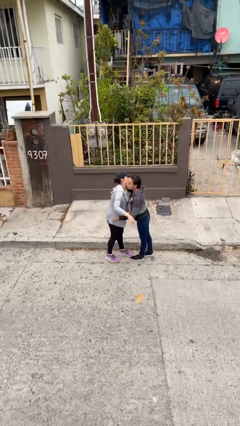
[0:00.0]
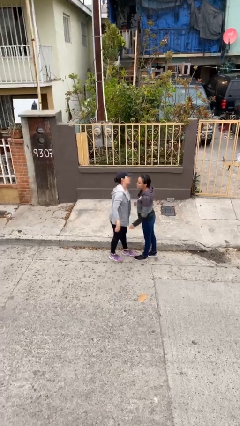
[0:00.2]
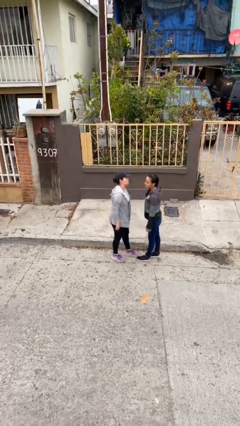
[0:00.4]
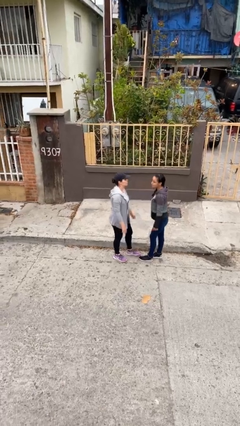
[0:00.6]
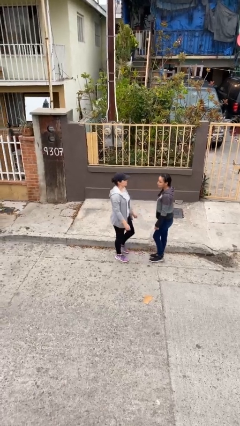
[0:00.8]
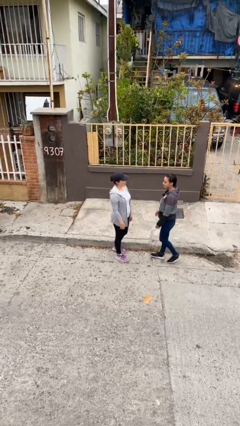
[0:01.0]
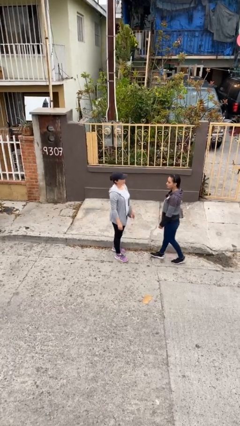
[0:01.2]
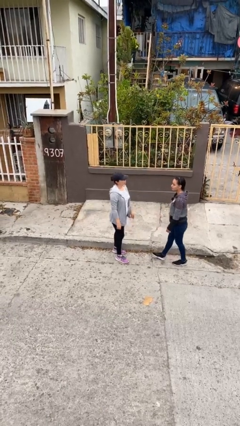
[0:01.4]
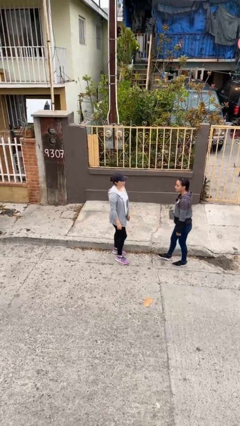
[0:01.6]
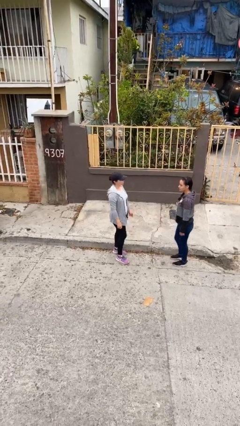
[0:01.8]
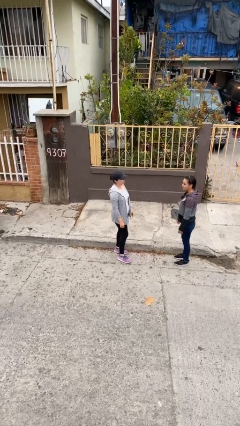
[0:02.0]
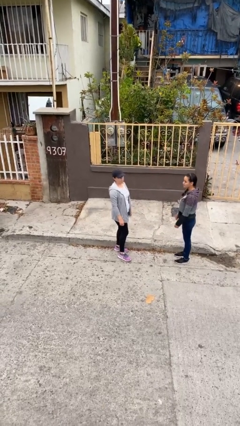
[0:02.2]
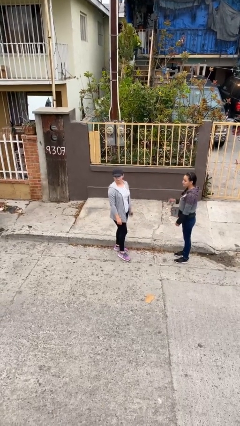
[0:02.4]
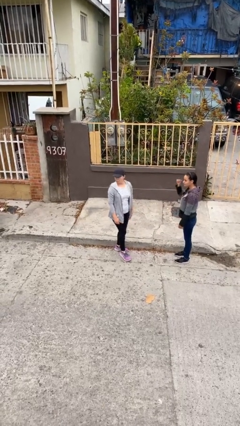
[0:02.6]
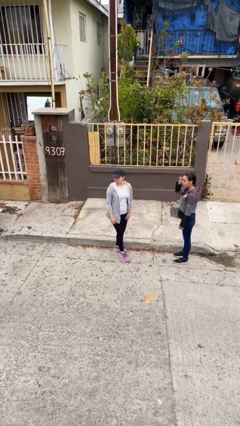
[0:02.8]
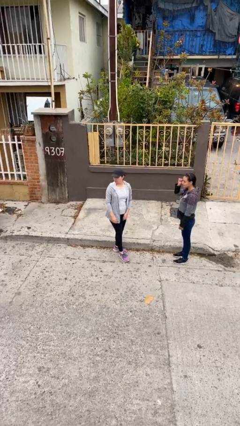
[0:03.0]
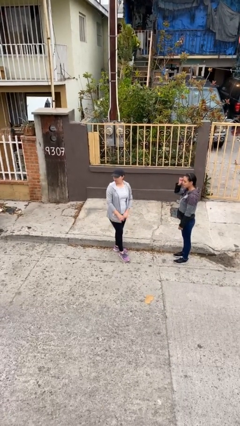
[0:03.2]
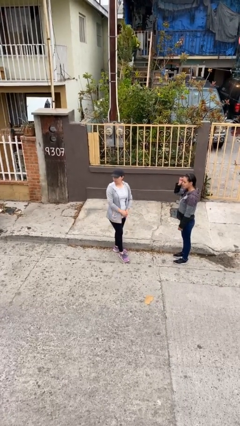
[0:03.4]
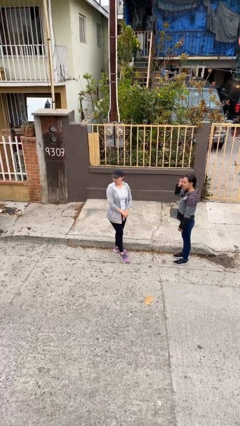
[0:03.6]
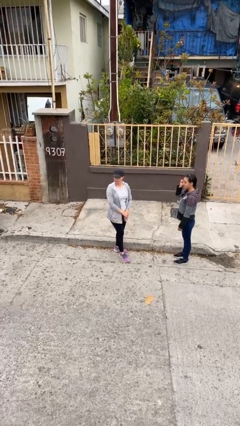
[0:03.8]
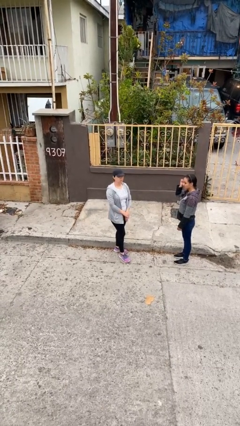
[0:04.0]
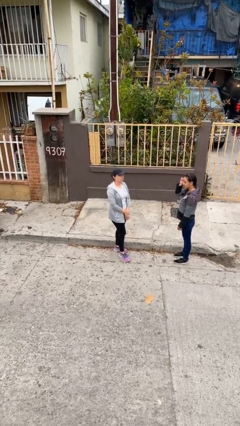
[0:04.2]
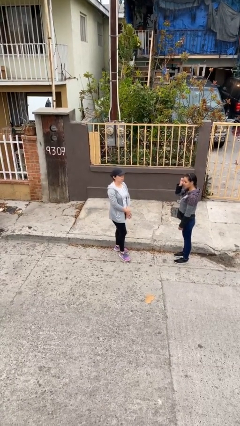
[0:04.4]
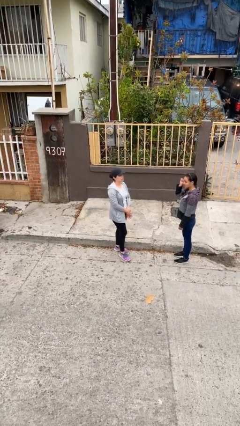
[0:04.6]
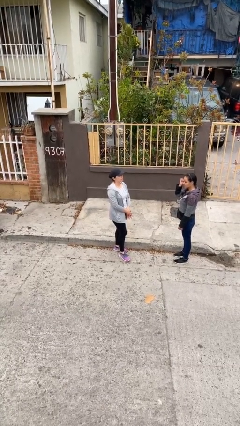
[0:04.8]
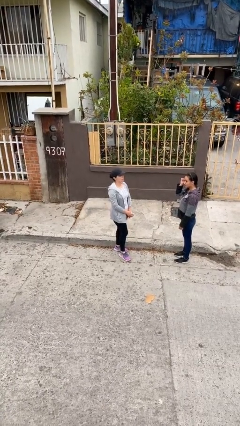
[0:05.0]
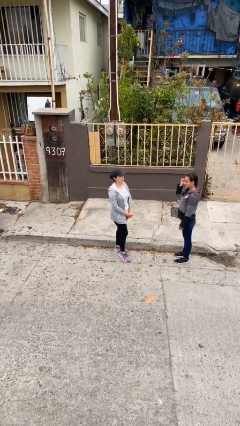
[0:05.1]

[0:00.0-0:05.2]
person talks to person

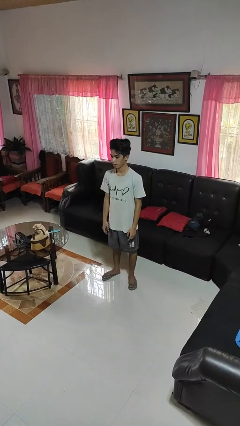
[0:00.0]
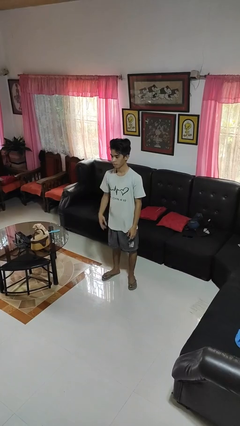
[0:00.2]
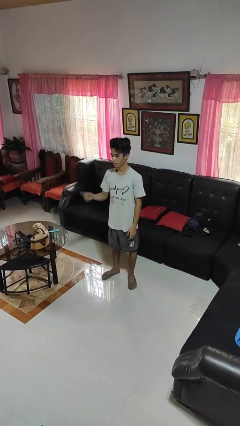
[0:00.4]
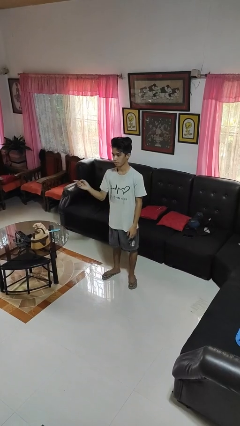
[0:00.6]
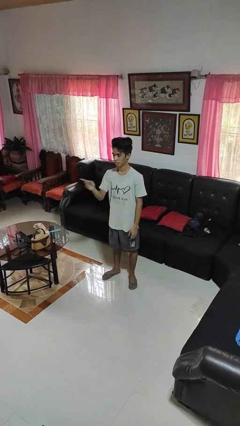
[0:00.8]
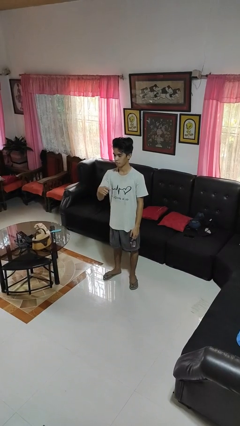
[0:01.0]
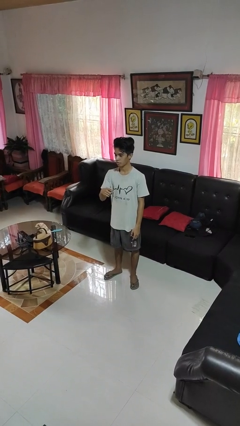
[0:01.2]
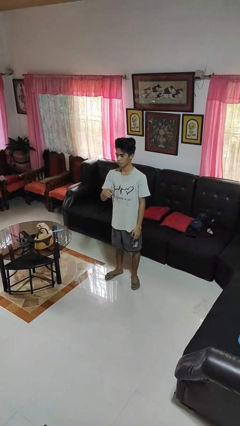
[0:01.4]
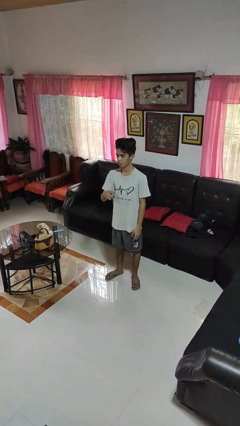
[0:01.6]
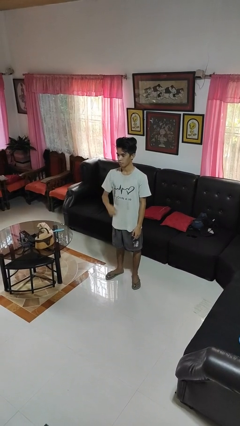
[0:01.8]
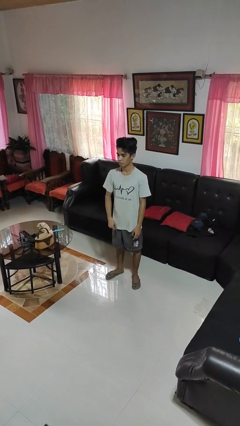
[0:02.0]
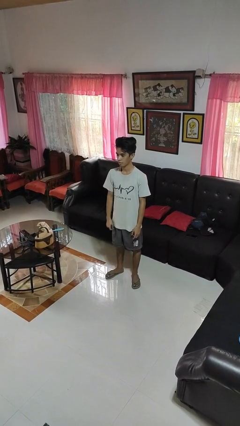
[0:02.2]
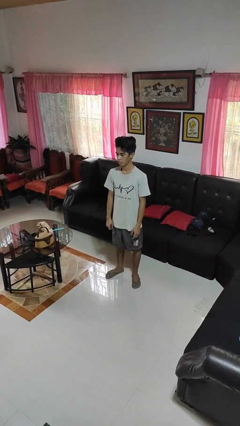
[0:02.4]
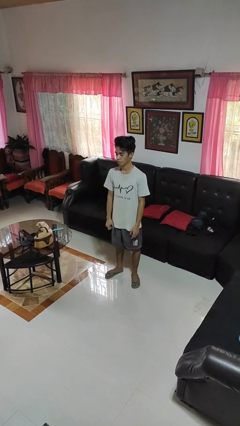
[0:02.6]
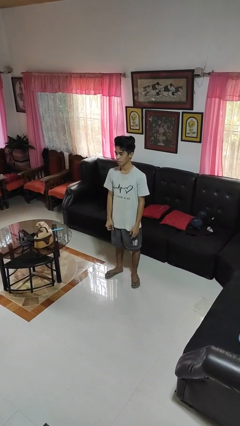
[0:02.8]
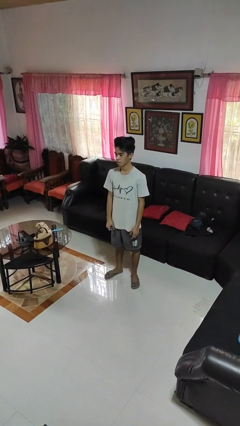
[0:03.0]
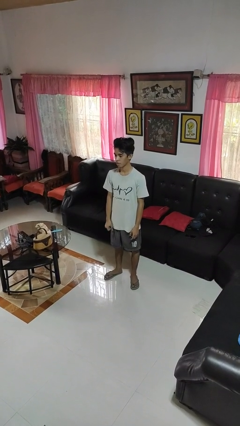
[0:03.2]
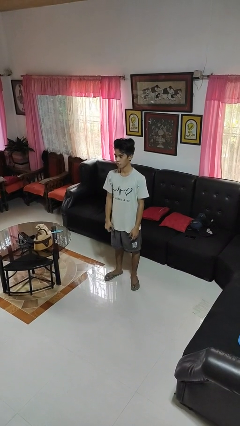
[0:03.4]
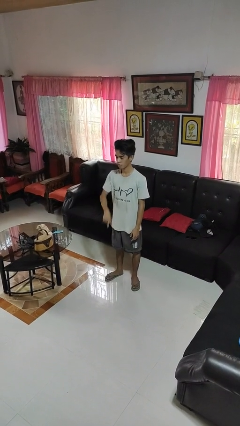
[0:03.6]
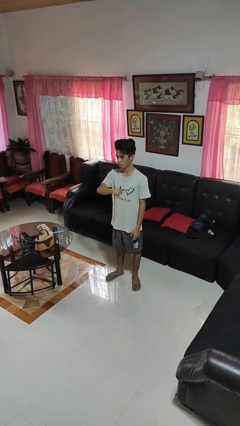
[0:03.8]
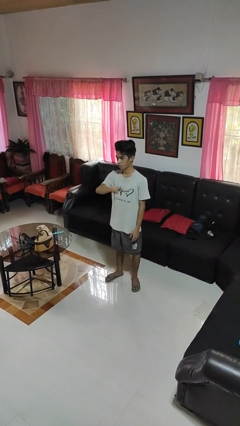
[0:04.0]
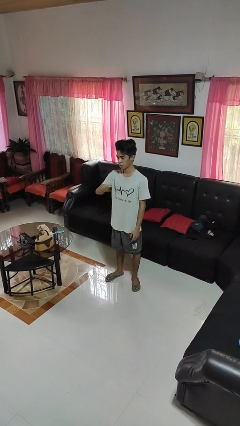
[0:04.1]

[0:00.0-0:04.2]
person gestures swipe left

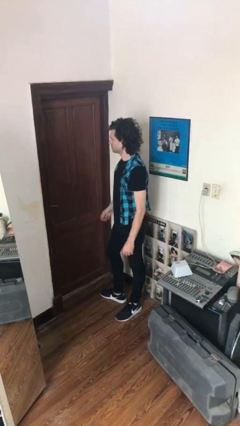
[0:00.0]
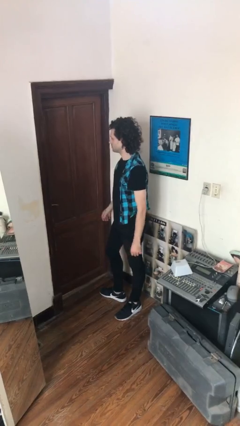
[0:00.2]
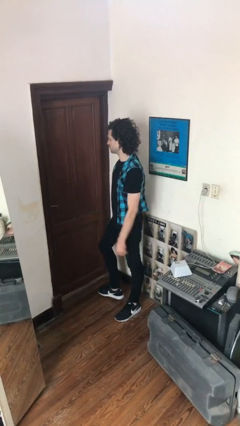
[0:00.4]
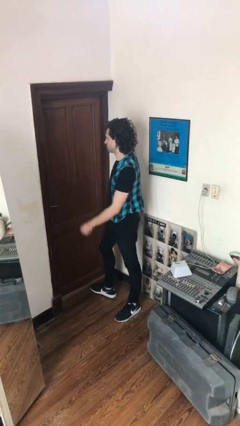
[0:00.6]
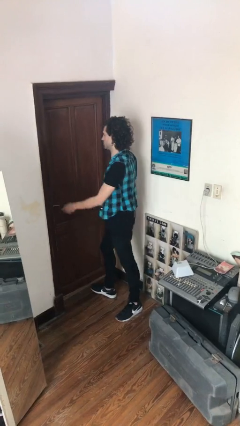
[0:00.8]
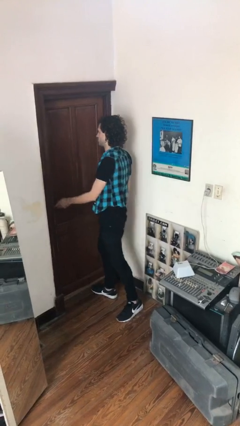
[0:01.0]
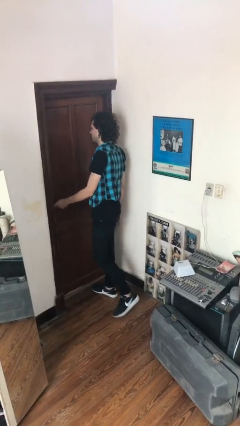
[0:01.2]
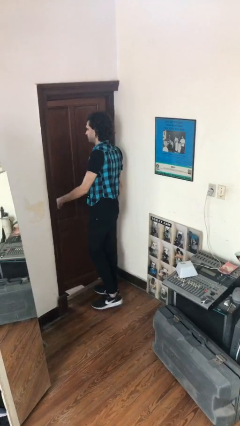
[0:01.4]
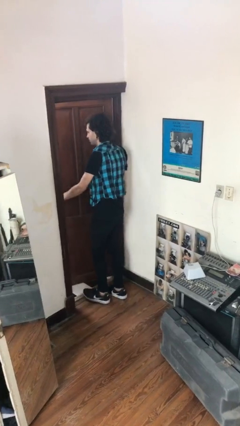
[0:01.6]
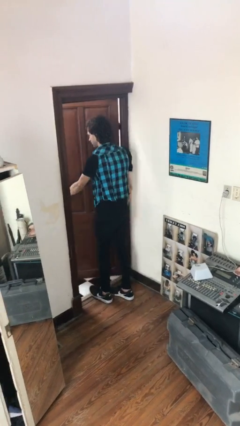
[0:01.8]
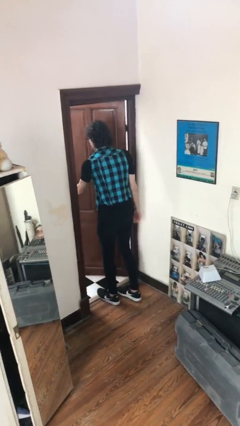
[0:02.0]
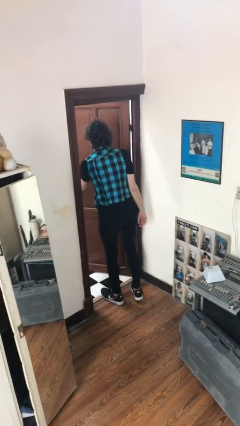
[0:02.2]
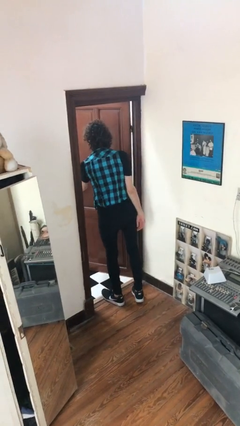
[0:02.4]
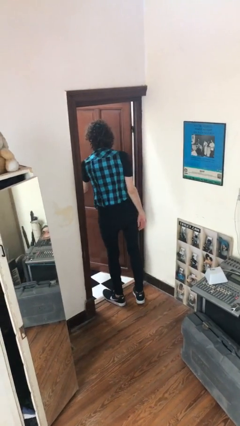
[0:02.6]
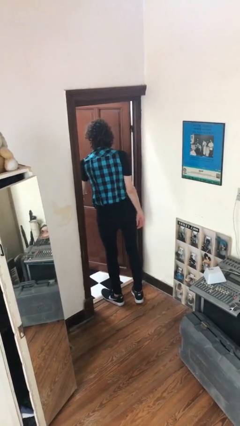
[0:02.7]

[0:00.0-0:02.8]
person opens facility door

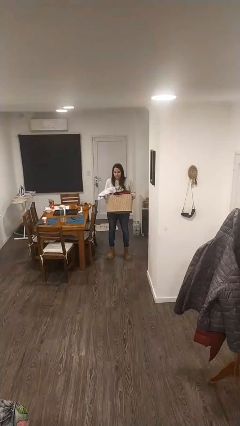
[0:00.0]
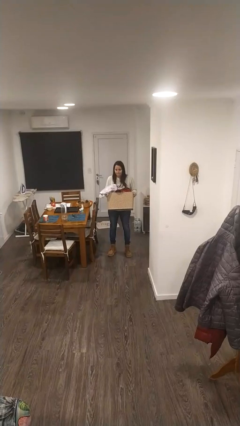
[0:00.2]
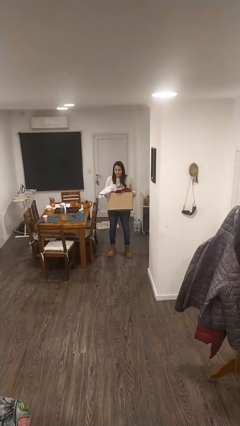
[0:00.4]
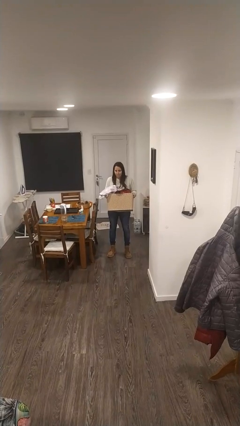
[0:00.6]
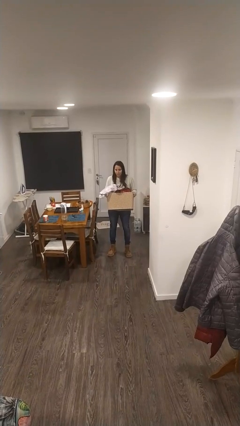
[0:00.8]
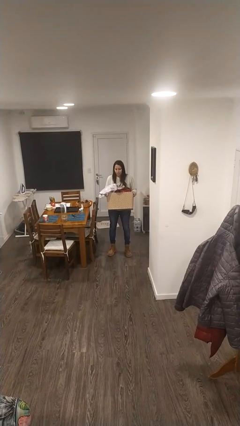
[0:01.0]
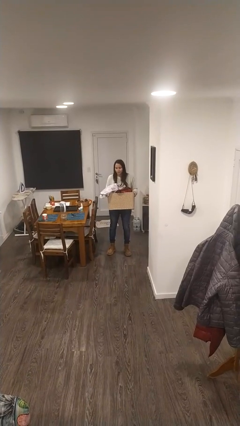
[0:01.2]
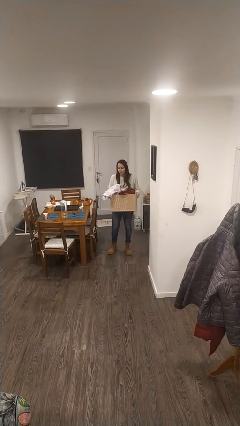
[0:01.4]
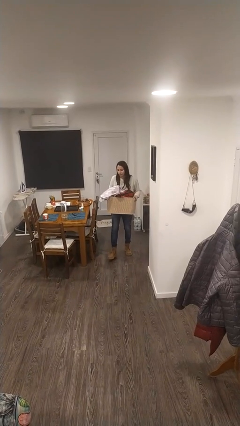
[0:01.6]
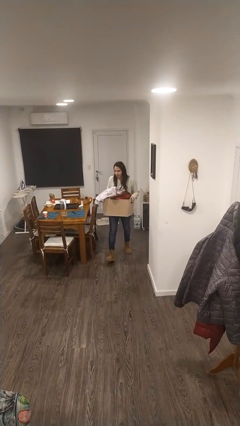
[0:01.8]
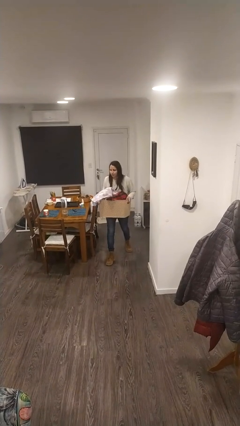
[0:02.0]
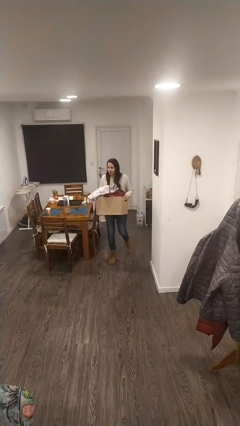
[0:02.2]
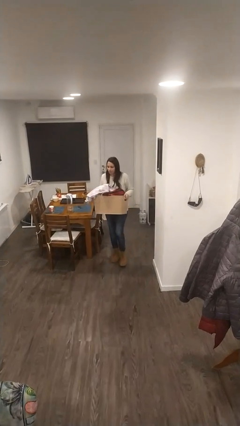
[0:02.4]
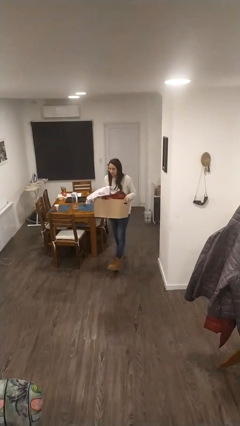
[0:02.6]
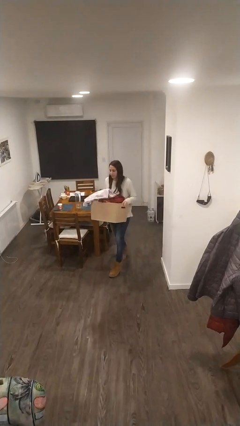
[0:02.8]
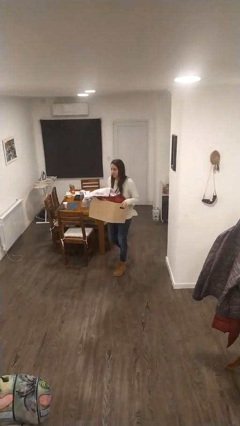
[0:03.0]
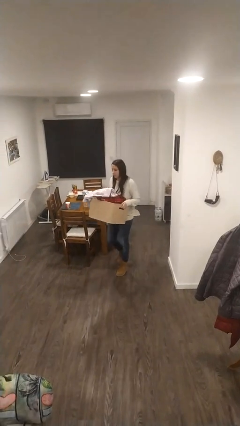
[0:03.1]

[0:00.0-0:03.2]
person carries laundry basket

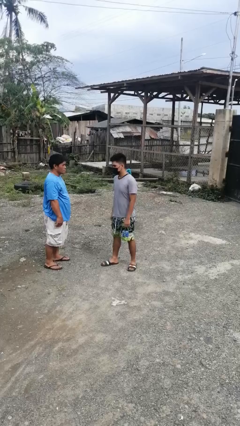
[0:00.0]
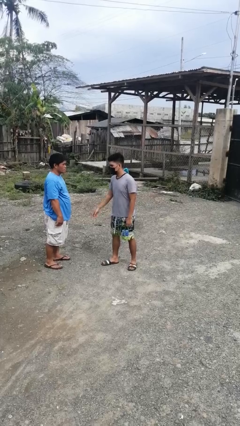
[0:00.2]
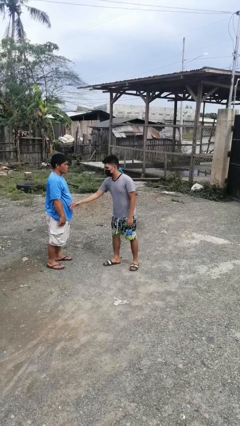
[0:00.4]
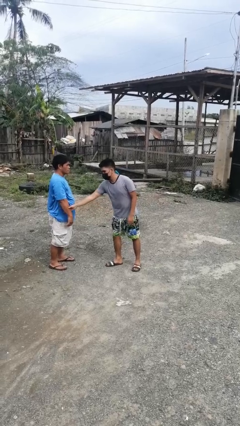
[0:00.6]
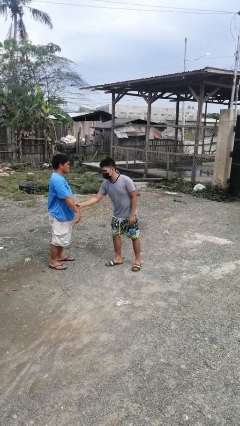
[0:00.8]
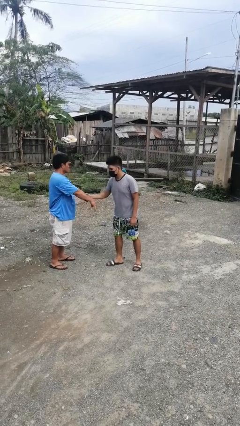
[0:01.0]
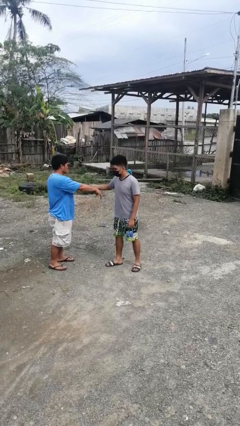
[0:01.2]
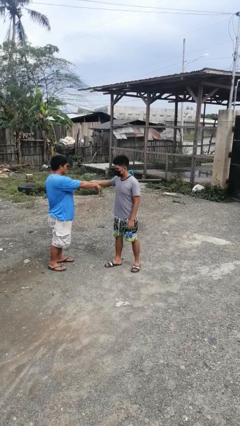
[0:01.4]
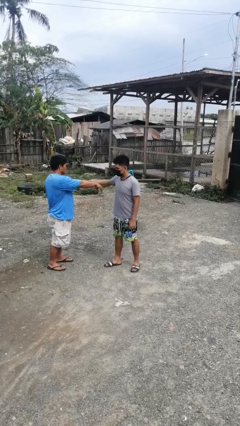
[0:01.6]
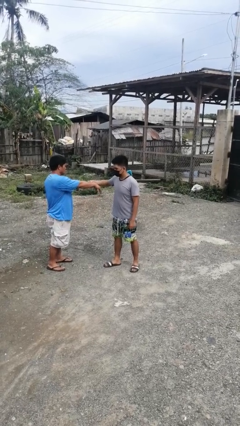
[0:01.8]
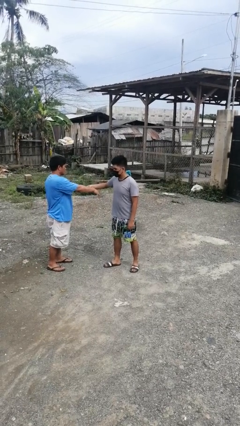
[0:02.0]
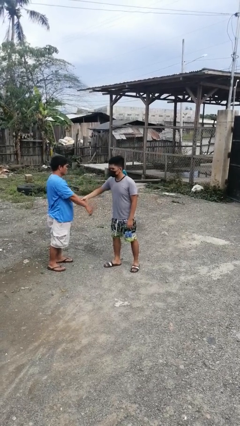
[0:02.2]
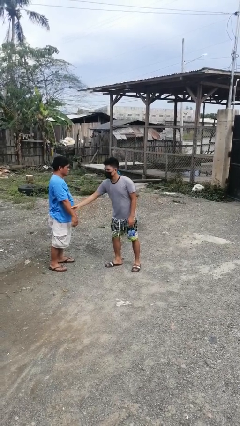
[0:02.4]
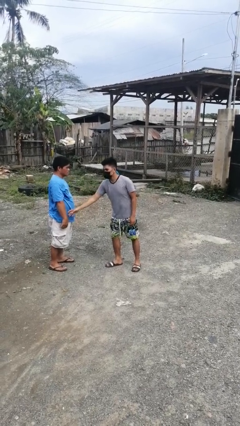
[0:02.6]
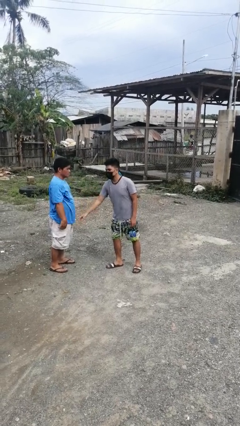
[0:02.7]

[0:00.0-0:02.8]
person grabs person by forearm
